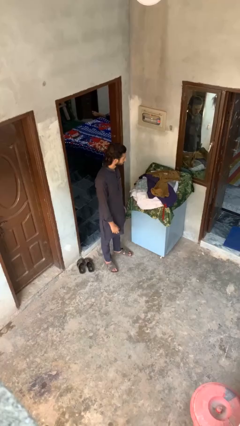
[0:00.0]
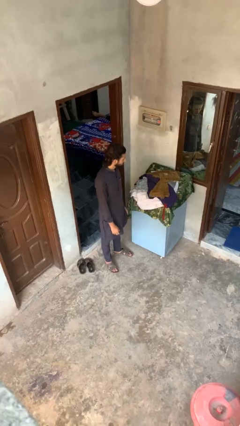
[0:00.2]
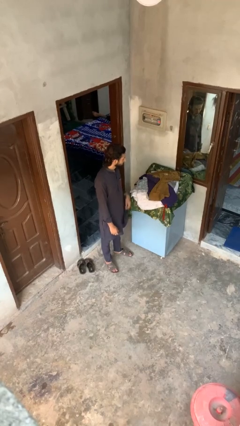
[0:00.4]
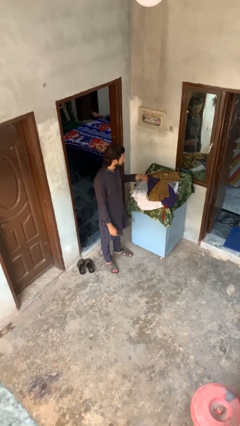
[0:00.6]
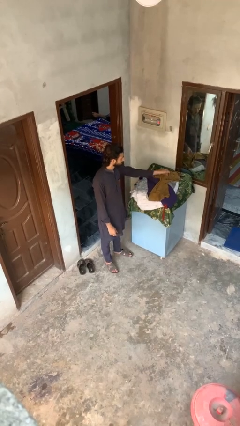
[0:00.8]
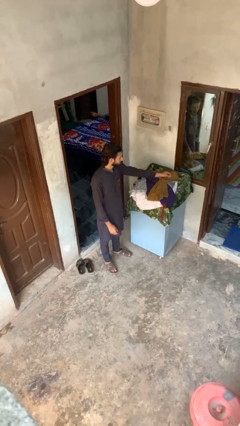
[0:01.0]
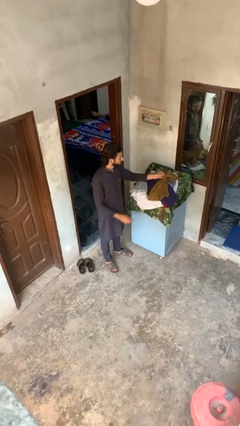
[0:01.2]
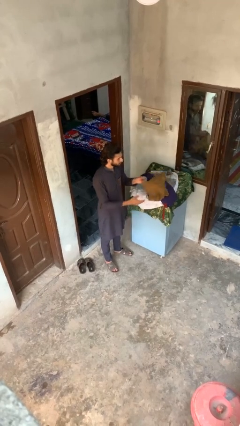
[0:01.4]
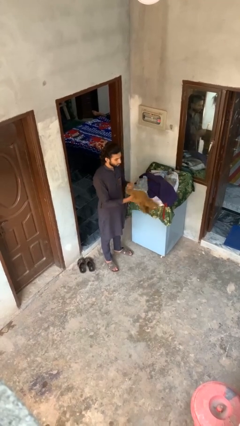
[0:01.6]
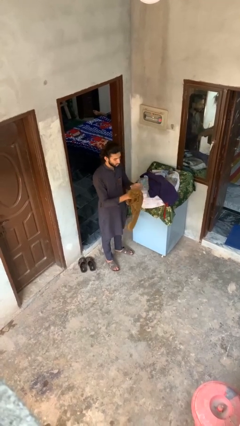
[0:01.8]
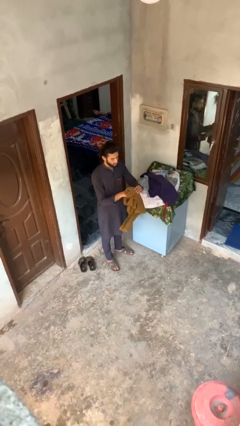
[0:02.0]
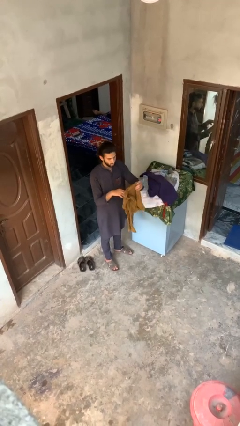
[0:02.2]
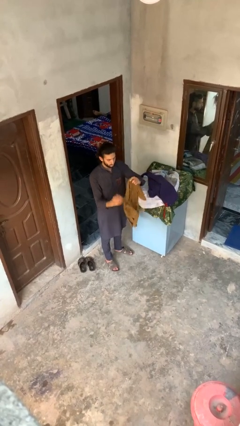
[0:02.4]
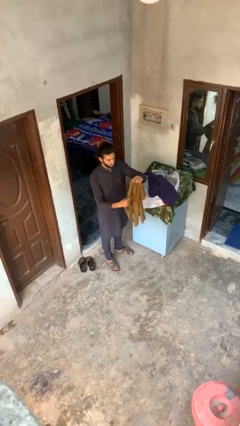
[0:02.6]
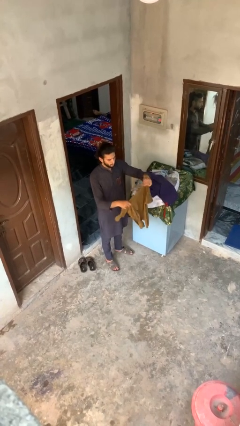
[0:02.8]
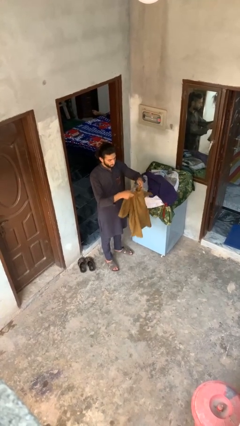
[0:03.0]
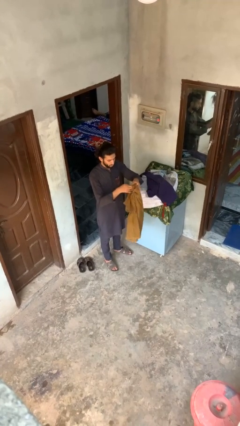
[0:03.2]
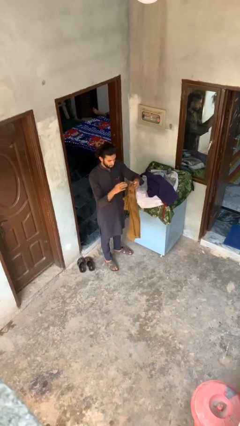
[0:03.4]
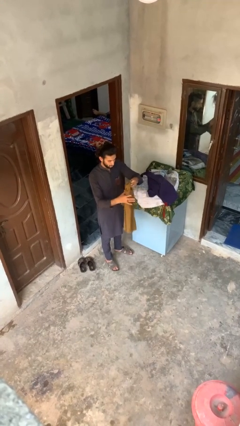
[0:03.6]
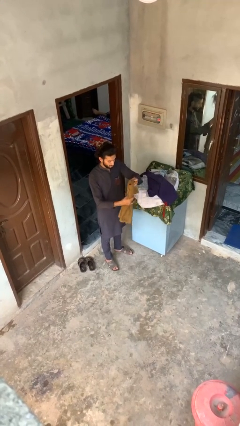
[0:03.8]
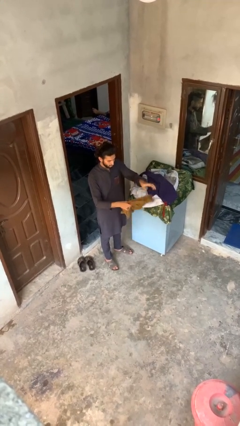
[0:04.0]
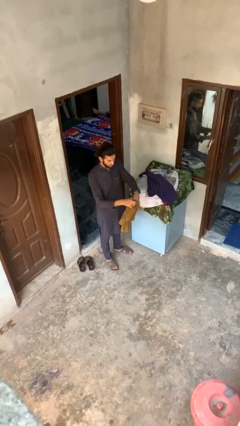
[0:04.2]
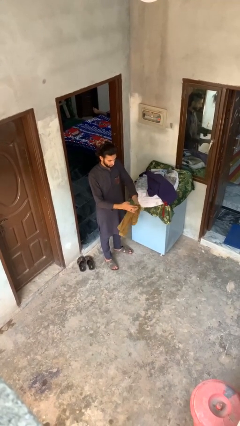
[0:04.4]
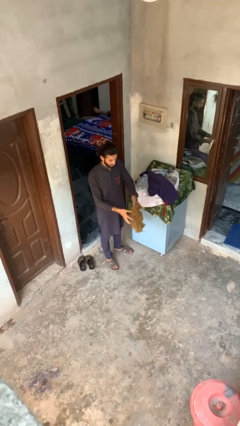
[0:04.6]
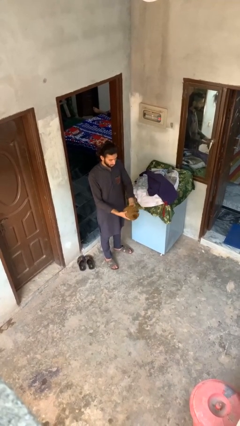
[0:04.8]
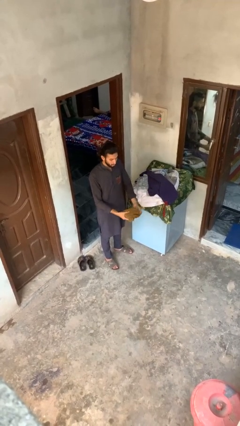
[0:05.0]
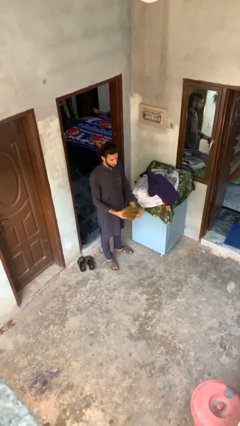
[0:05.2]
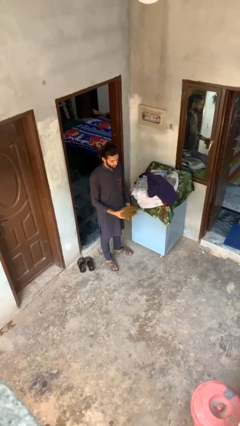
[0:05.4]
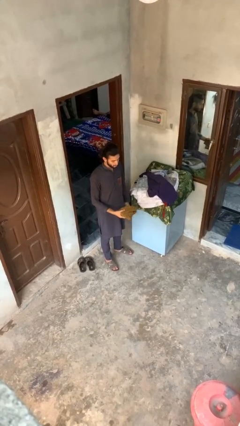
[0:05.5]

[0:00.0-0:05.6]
person folds shirt

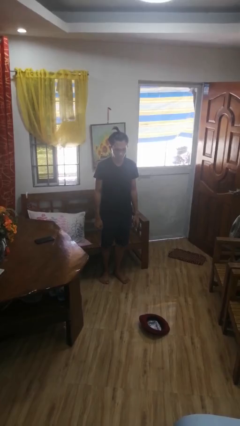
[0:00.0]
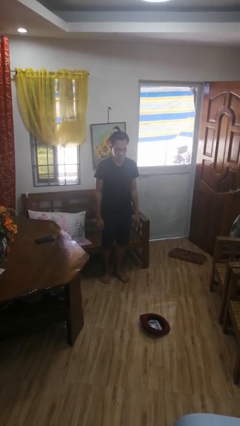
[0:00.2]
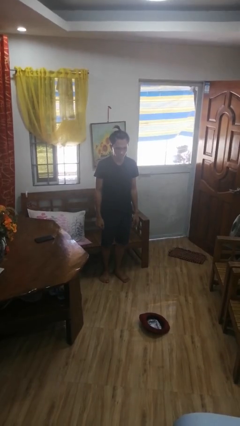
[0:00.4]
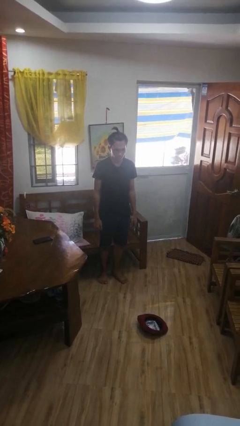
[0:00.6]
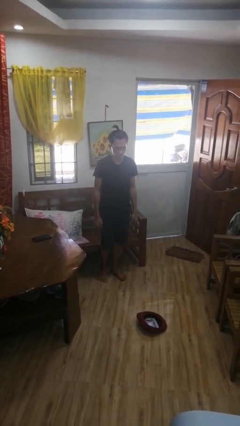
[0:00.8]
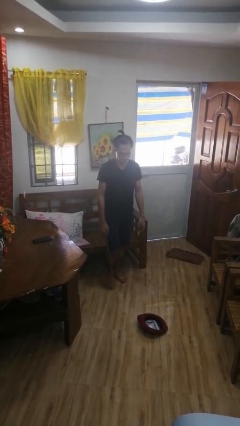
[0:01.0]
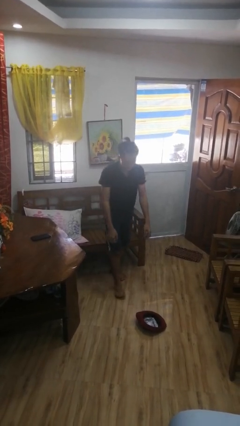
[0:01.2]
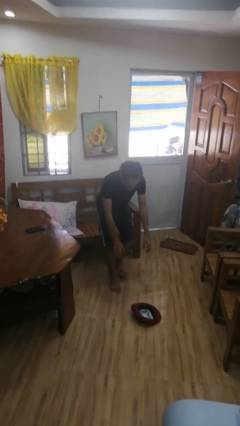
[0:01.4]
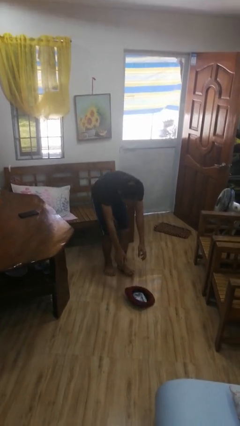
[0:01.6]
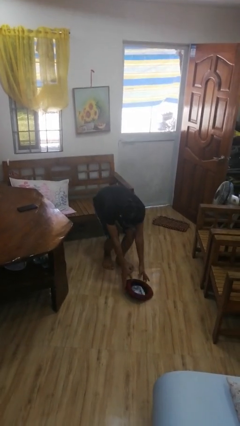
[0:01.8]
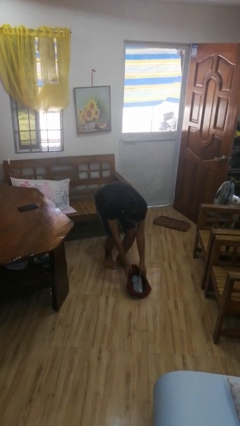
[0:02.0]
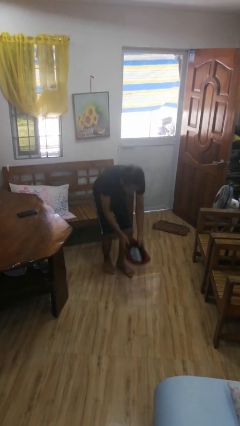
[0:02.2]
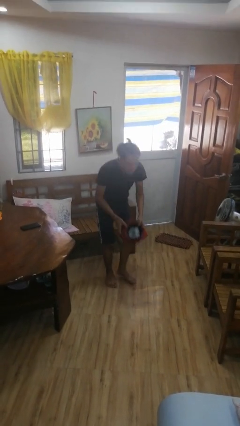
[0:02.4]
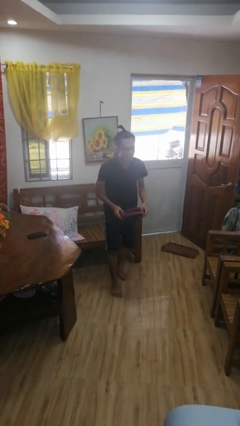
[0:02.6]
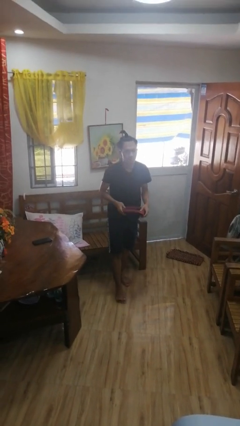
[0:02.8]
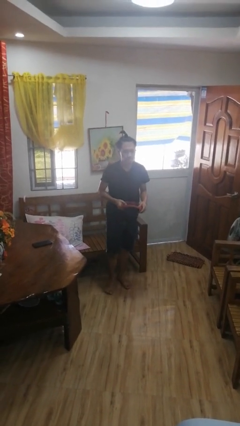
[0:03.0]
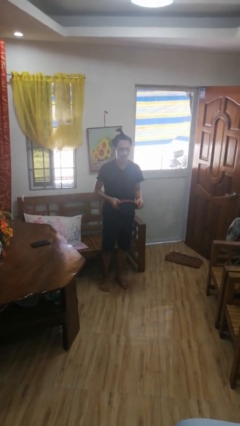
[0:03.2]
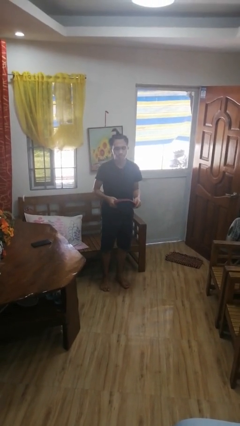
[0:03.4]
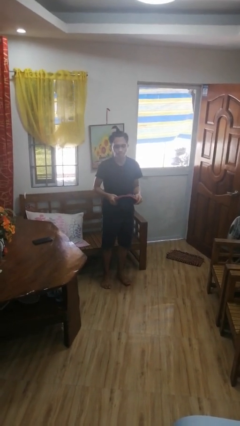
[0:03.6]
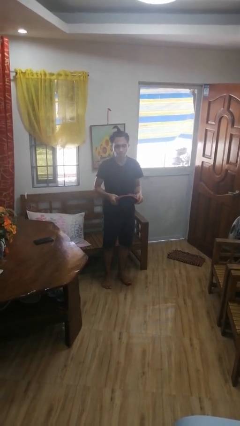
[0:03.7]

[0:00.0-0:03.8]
person picks up object from floor

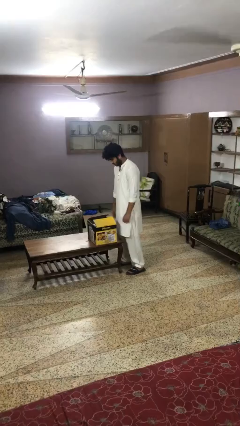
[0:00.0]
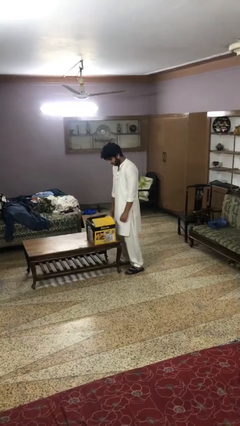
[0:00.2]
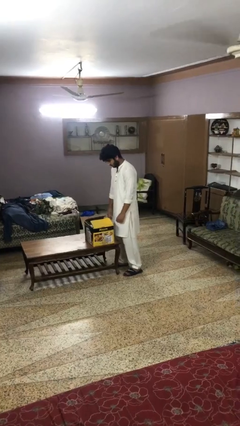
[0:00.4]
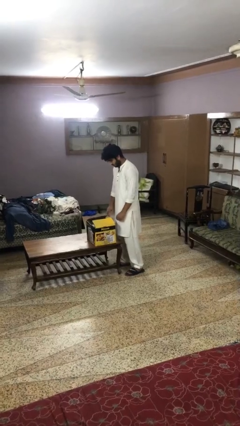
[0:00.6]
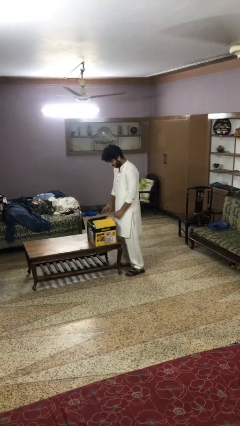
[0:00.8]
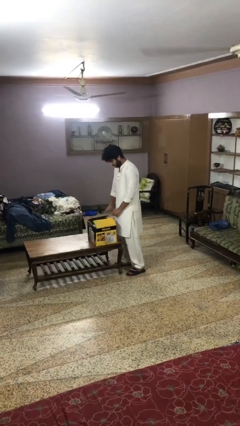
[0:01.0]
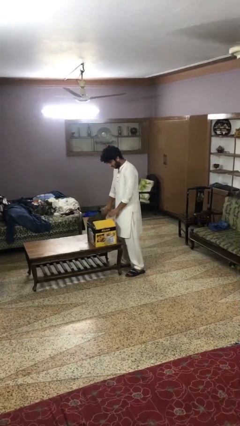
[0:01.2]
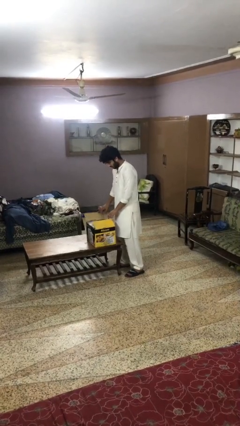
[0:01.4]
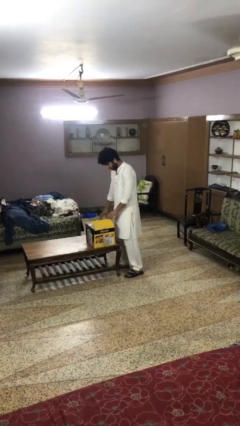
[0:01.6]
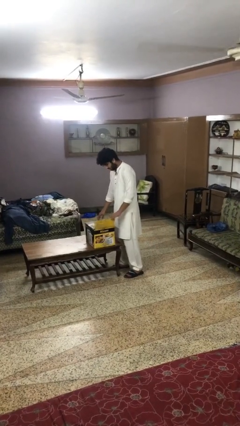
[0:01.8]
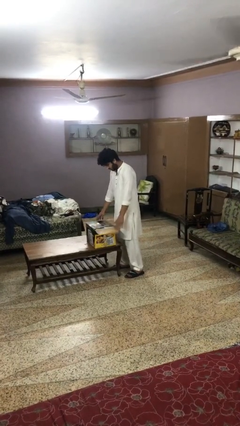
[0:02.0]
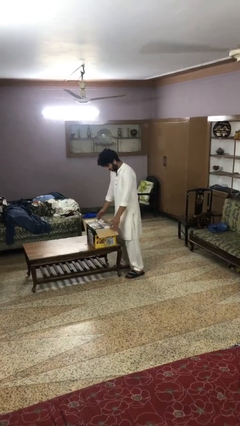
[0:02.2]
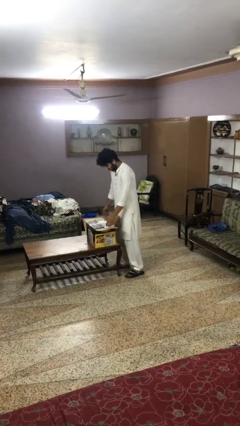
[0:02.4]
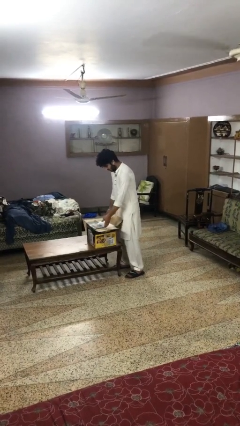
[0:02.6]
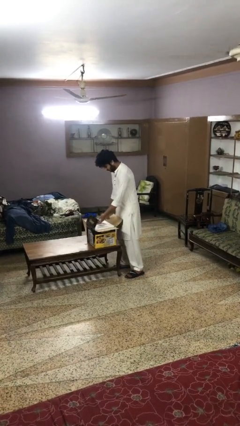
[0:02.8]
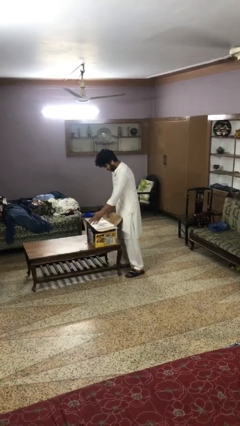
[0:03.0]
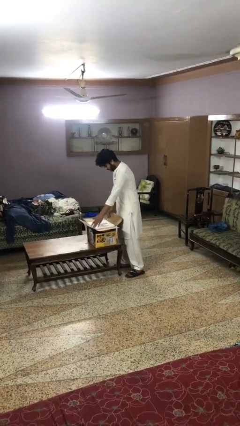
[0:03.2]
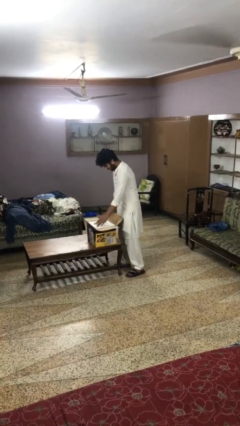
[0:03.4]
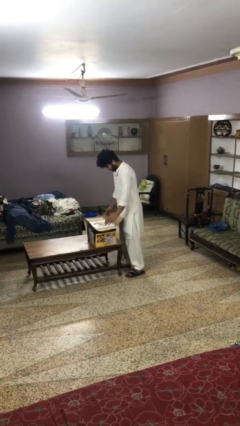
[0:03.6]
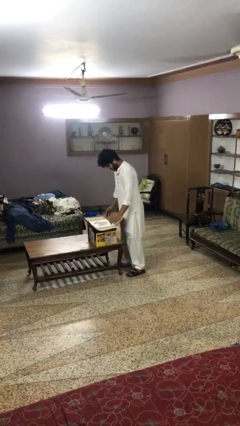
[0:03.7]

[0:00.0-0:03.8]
person opens box

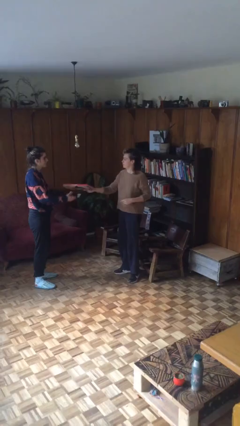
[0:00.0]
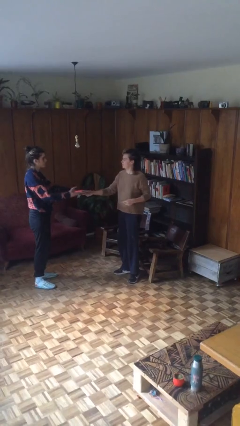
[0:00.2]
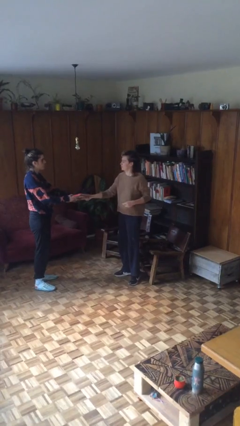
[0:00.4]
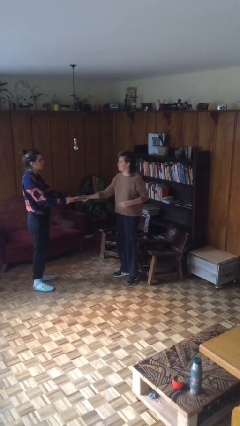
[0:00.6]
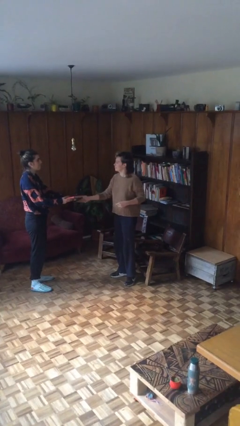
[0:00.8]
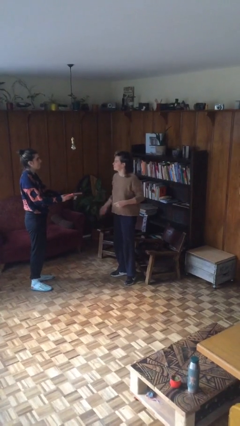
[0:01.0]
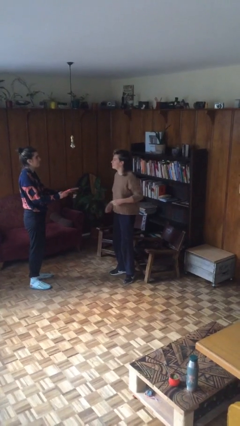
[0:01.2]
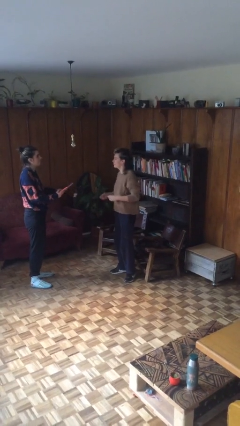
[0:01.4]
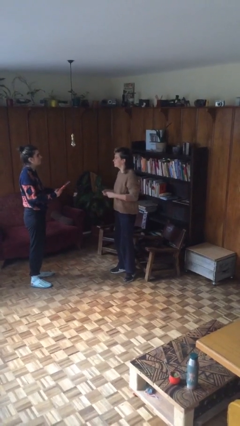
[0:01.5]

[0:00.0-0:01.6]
person transfers object to person

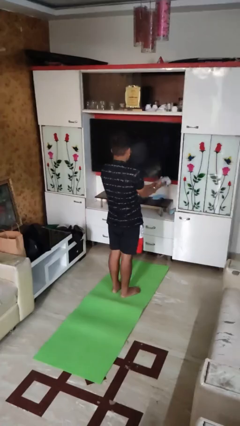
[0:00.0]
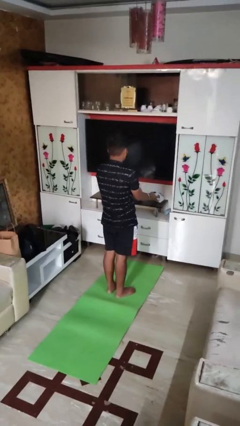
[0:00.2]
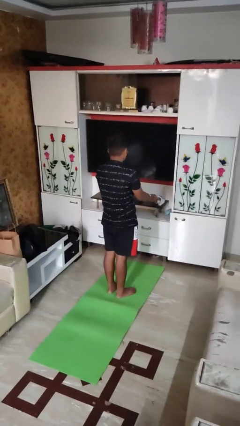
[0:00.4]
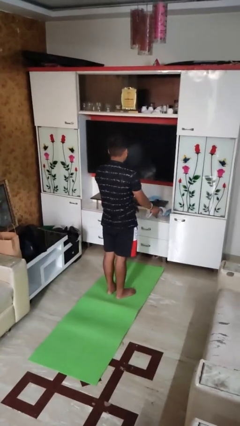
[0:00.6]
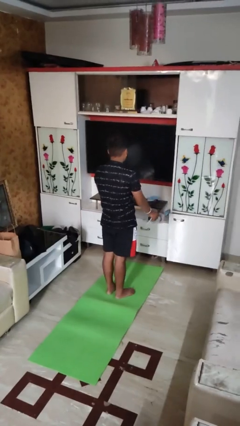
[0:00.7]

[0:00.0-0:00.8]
person catches dropped object

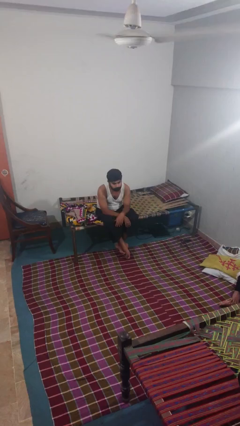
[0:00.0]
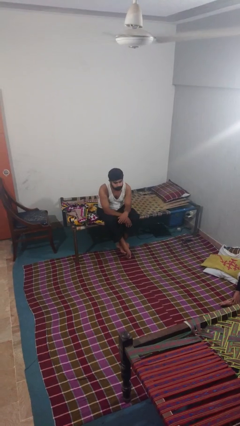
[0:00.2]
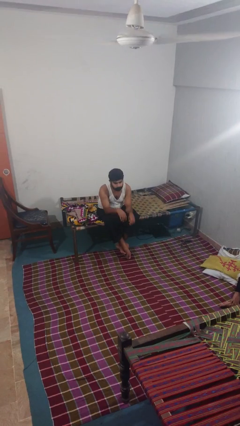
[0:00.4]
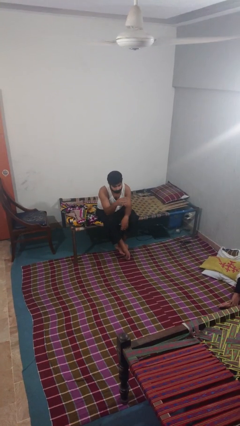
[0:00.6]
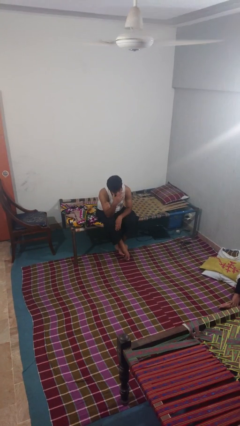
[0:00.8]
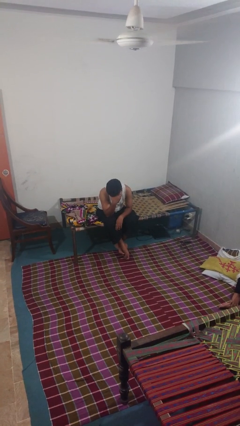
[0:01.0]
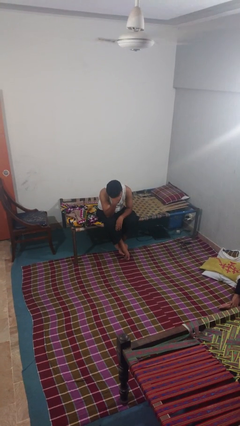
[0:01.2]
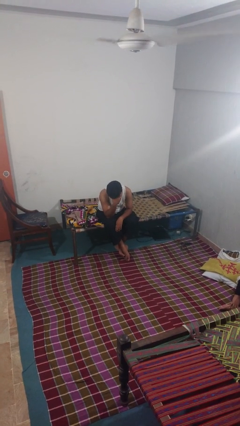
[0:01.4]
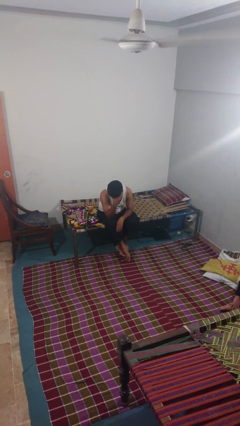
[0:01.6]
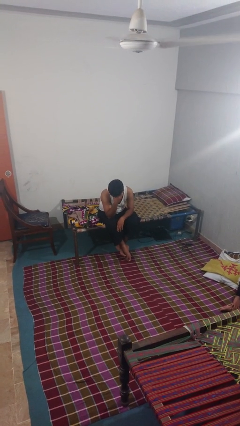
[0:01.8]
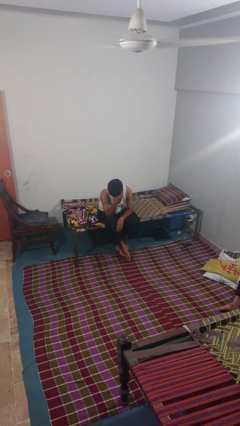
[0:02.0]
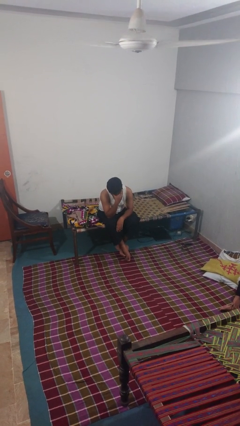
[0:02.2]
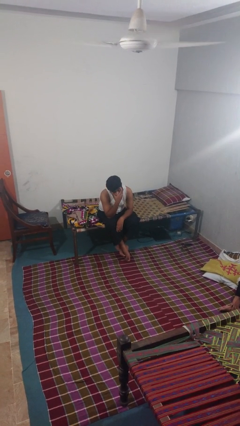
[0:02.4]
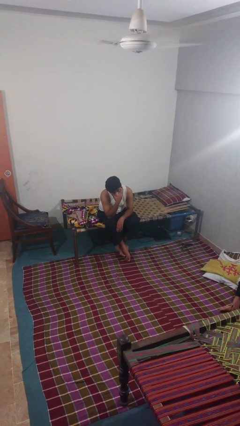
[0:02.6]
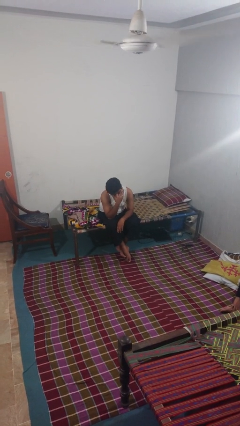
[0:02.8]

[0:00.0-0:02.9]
person covers face with hands
